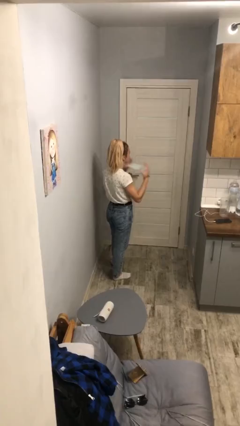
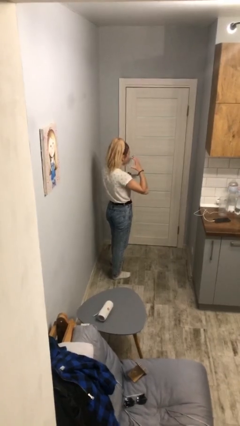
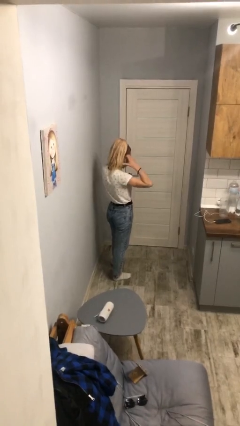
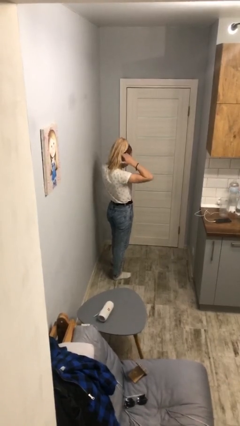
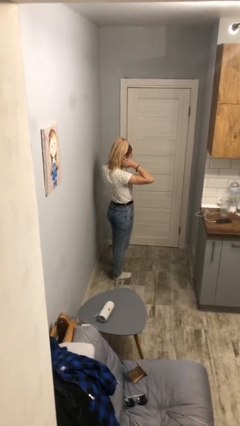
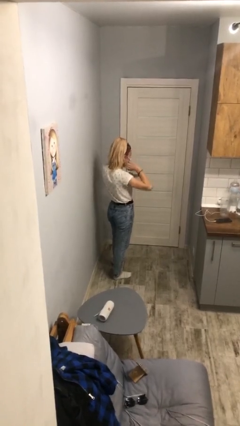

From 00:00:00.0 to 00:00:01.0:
person puts on facemask

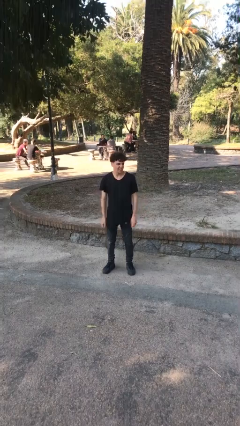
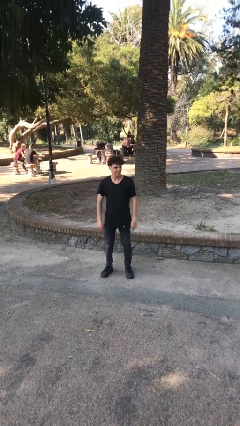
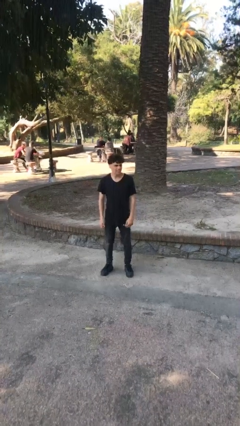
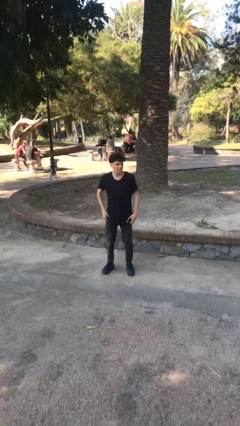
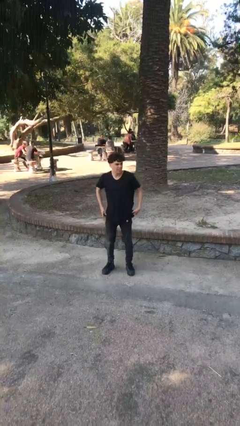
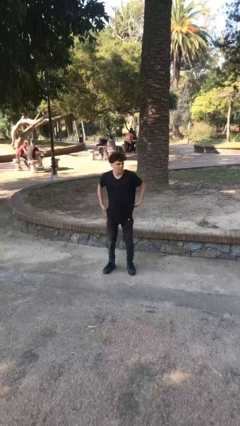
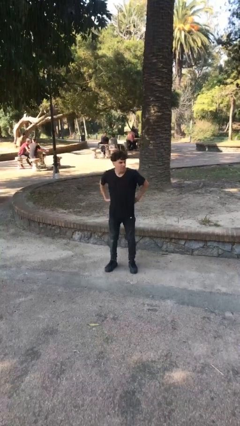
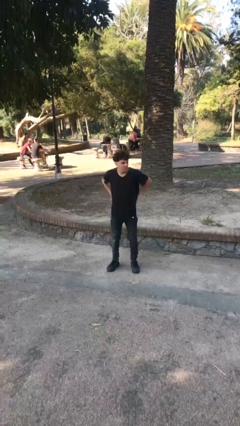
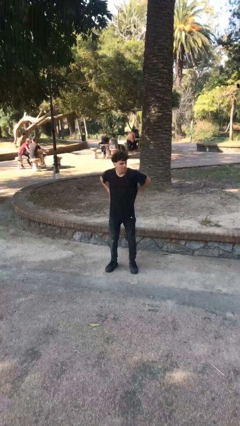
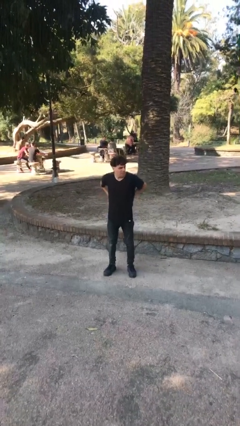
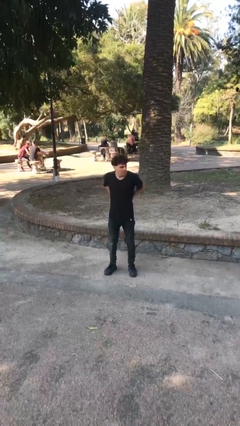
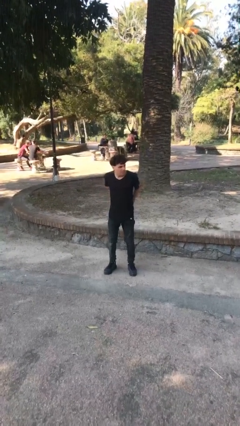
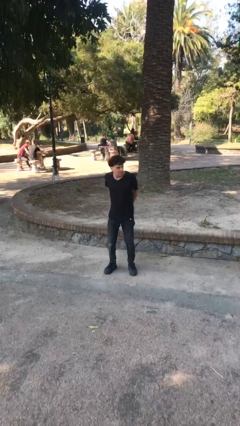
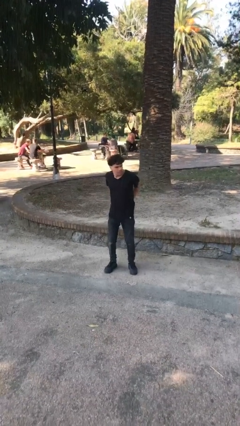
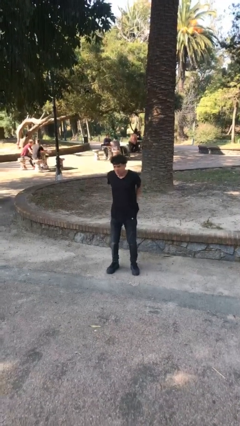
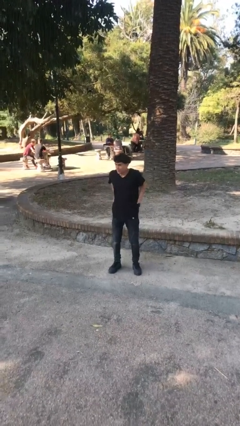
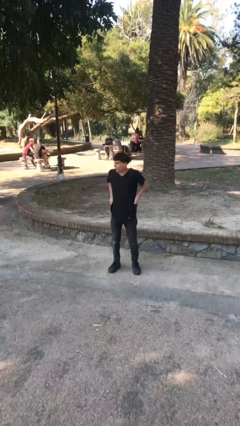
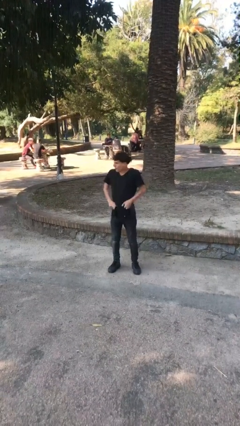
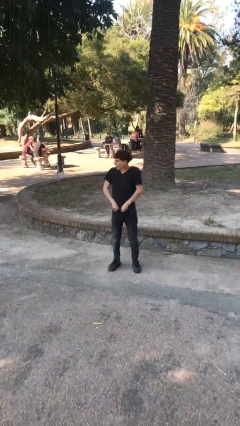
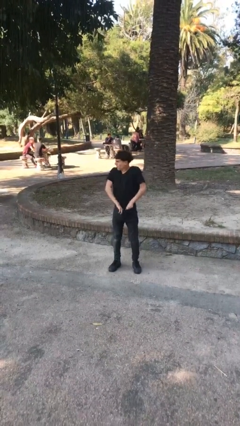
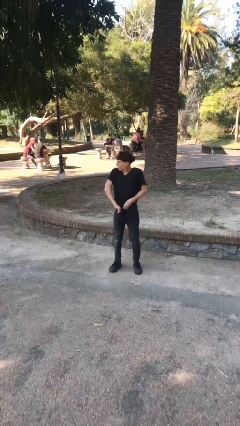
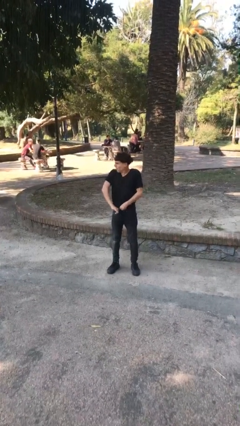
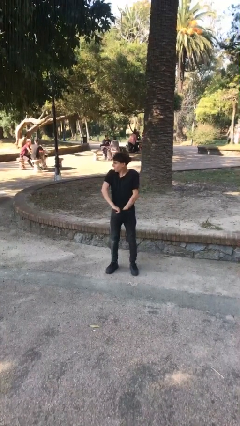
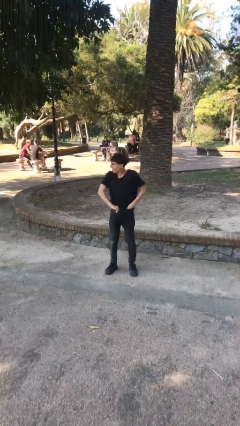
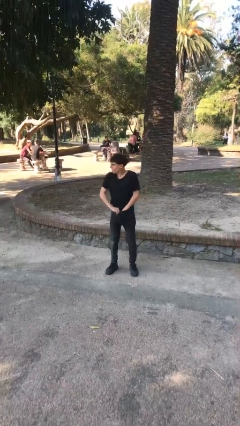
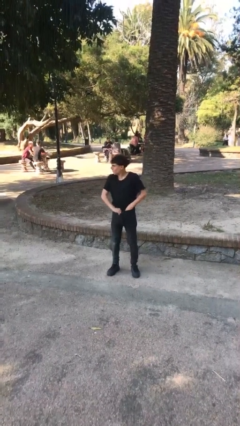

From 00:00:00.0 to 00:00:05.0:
person tucks in shirt

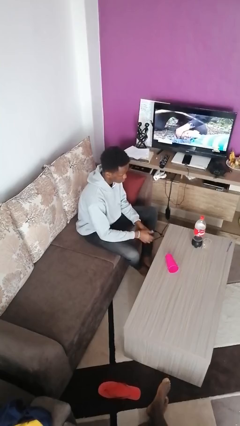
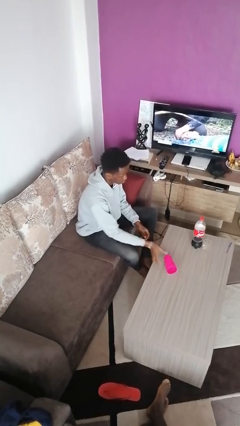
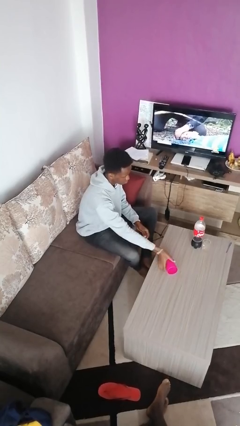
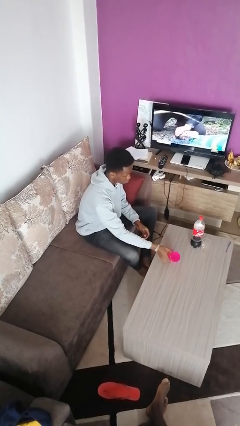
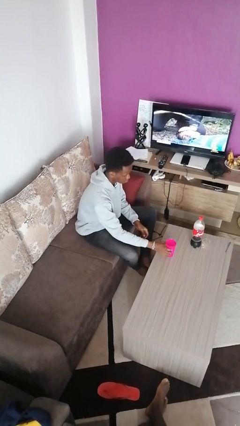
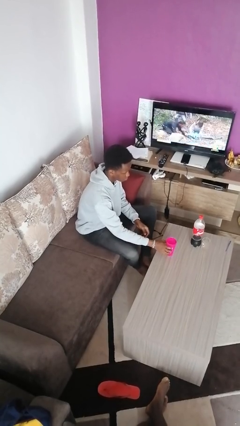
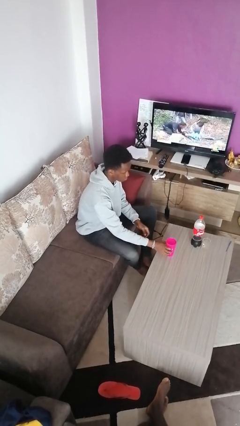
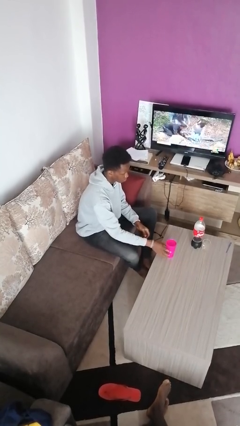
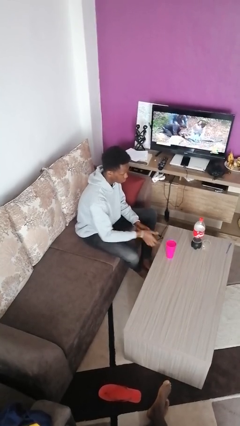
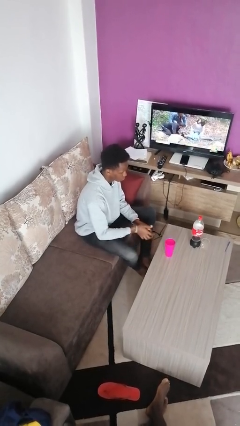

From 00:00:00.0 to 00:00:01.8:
person sets upright glass

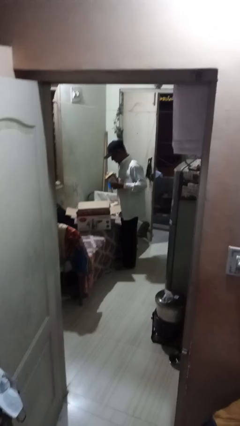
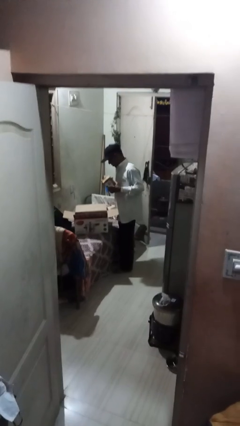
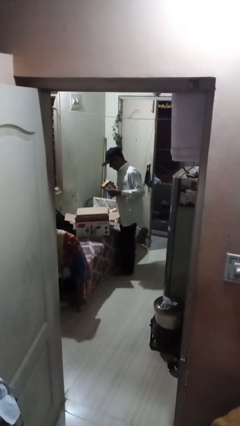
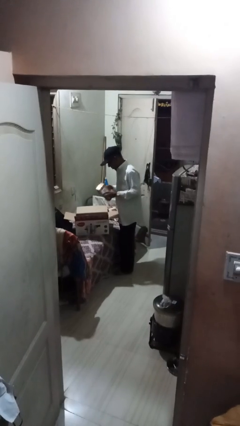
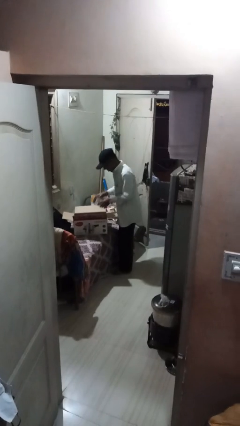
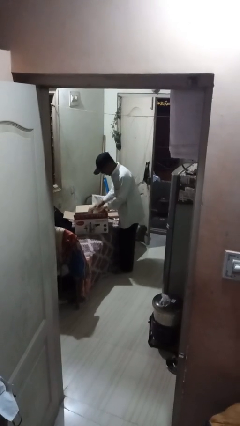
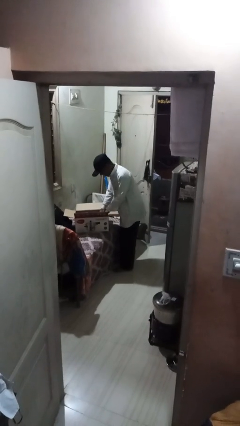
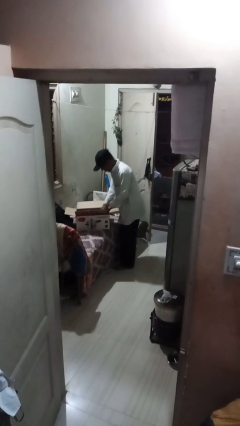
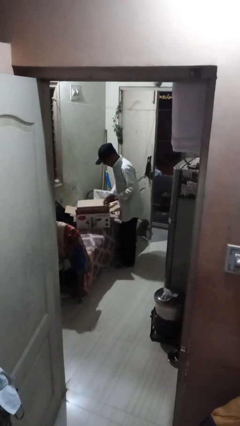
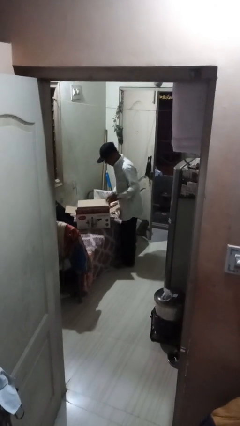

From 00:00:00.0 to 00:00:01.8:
person puts object into box

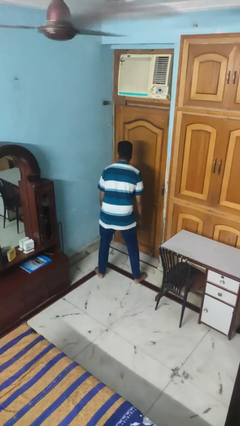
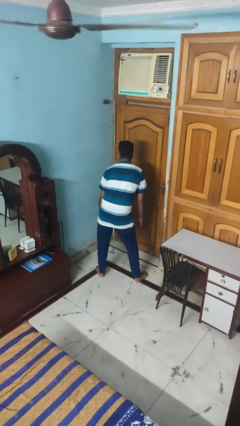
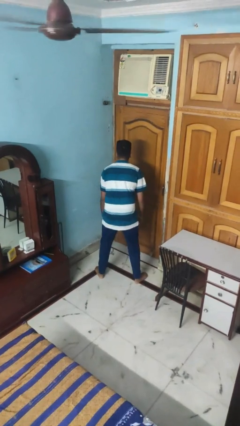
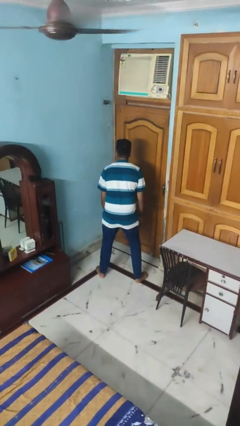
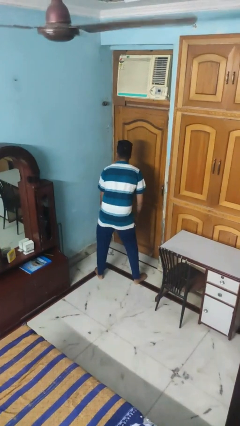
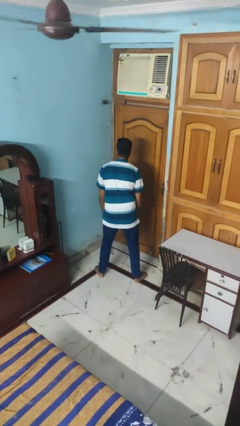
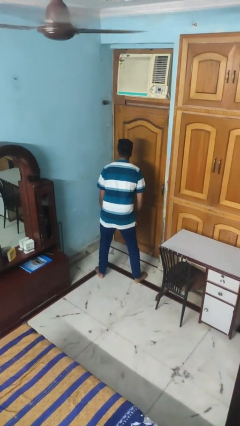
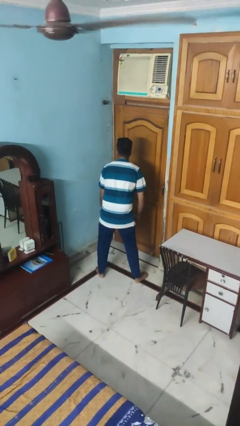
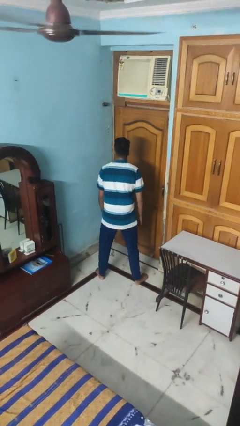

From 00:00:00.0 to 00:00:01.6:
person wiggles hips

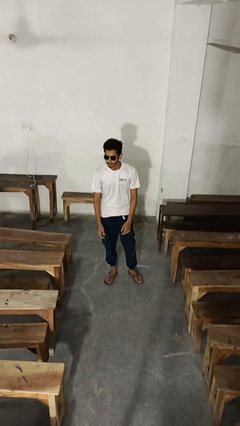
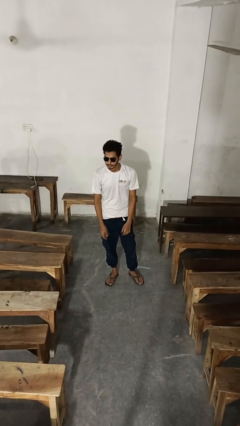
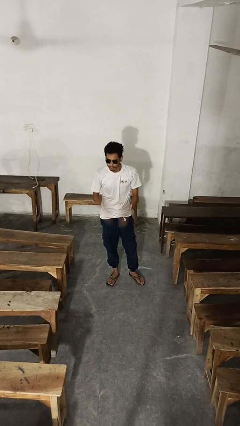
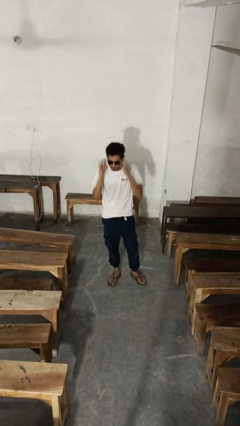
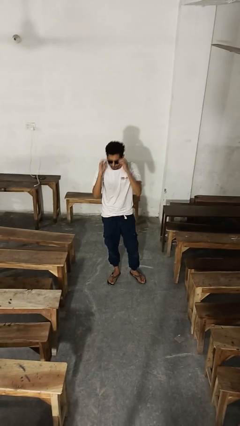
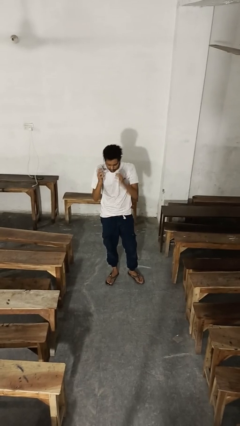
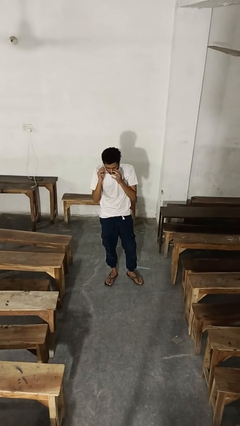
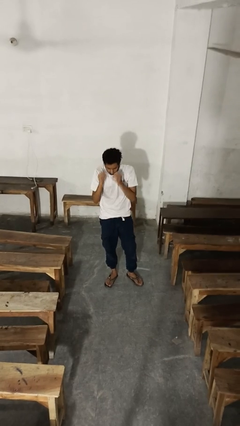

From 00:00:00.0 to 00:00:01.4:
person takes off sunglasses

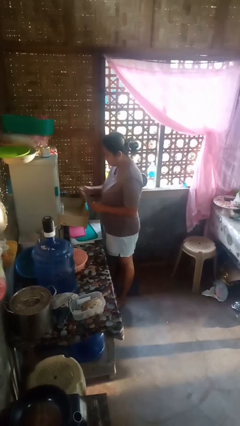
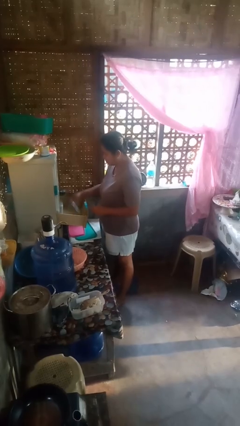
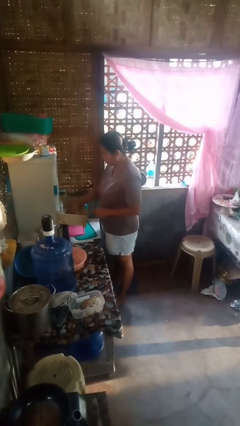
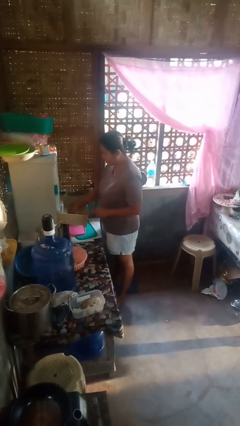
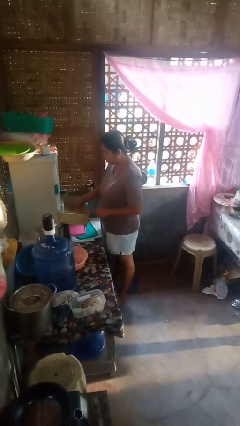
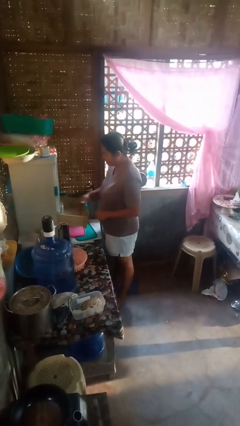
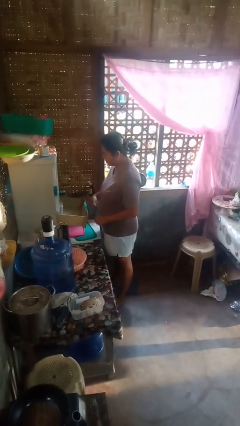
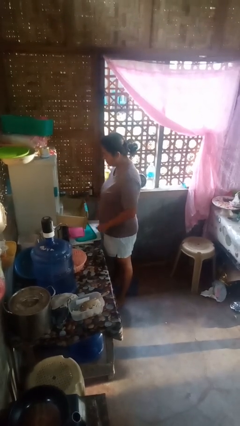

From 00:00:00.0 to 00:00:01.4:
person puts object into kitchen drawer

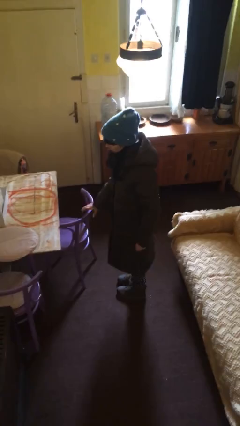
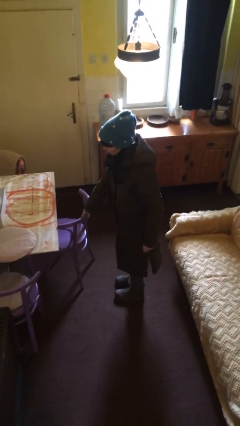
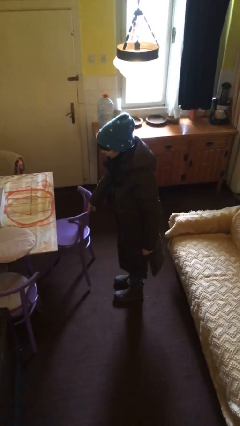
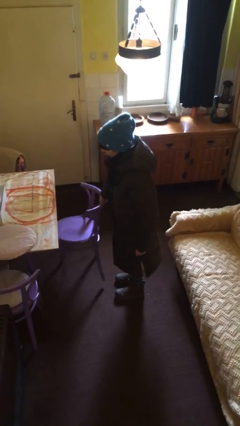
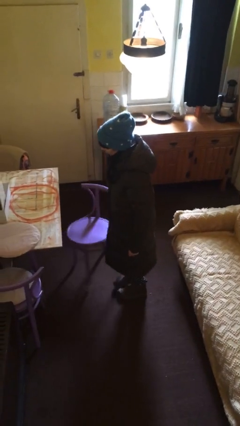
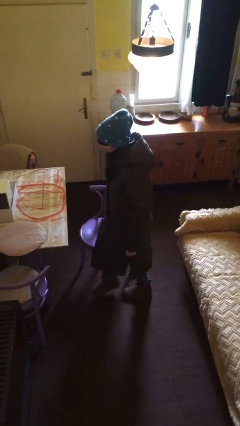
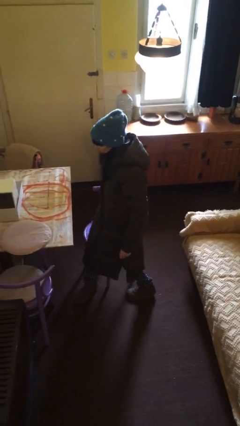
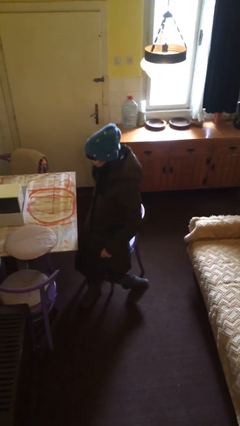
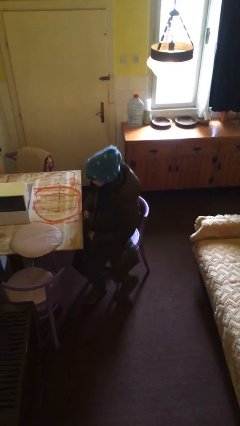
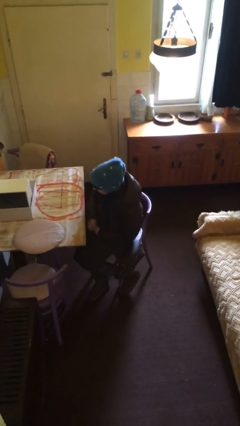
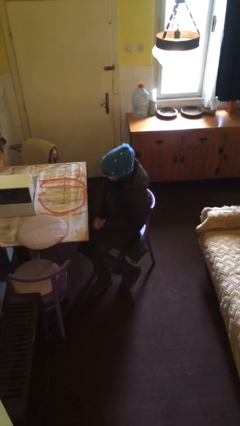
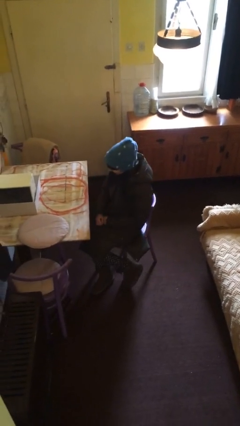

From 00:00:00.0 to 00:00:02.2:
person sits down

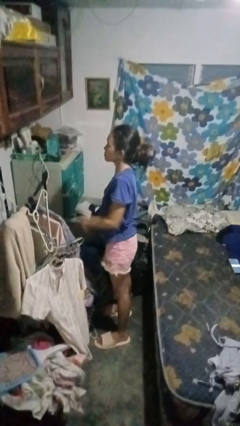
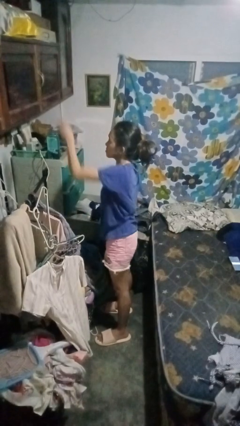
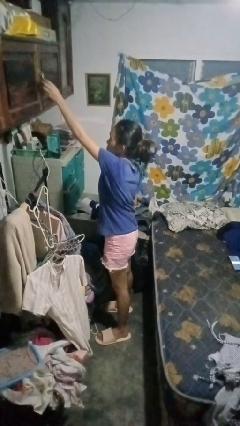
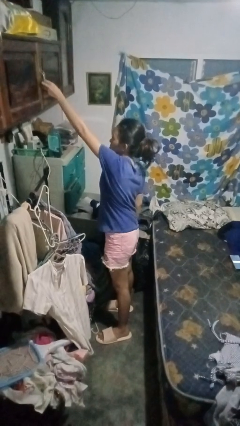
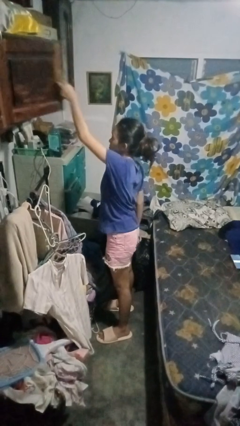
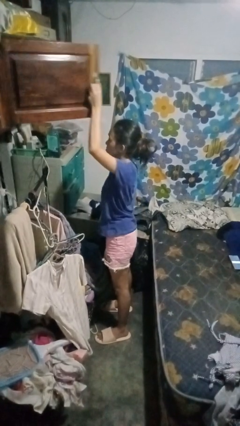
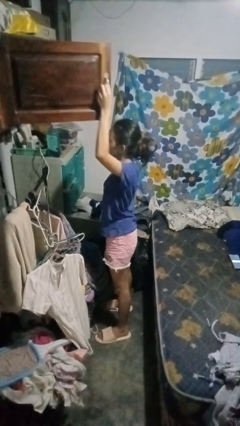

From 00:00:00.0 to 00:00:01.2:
person opens closet door
